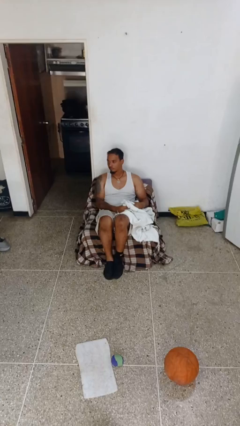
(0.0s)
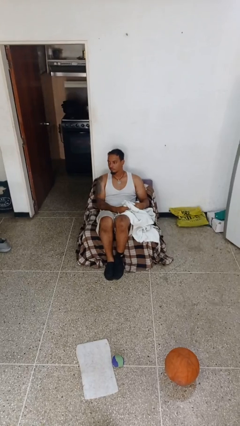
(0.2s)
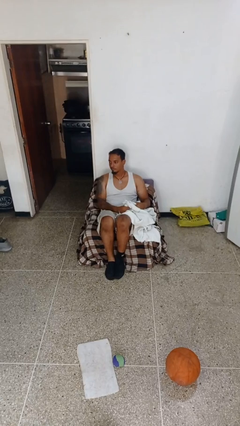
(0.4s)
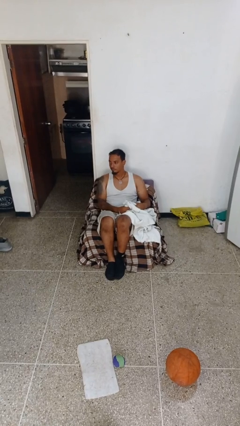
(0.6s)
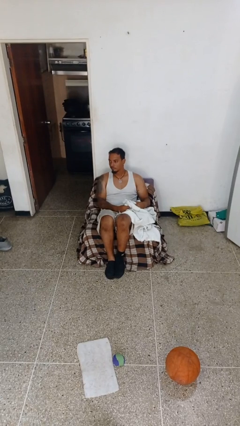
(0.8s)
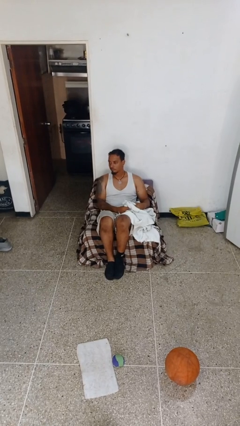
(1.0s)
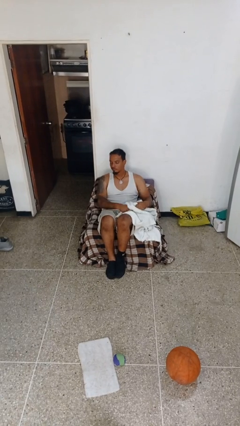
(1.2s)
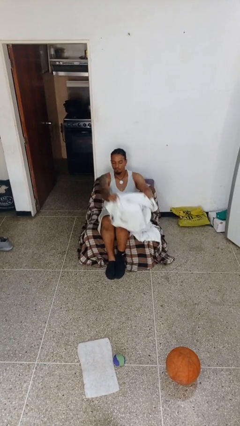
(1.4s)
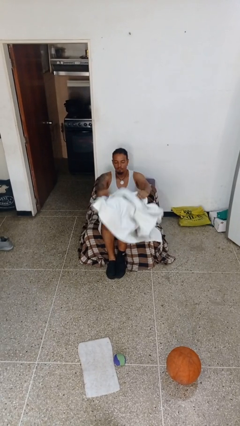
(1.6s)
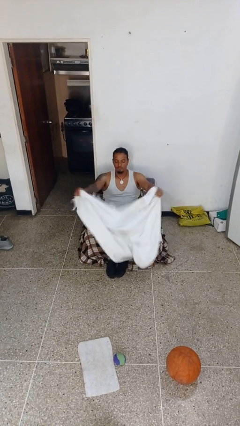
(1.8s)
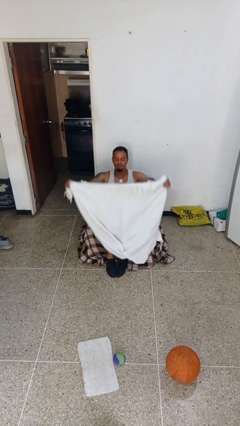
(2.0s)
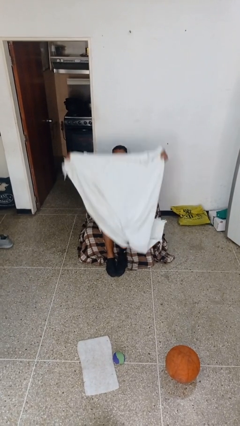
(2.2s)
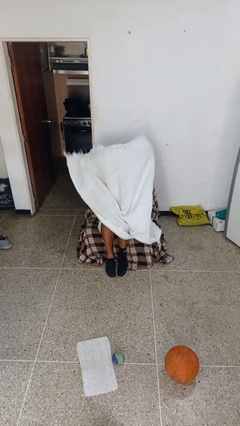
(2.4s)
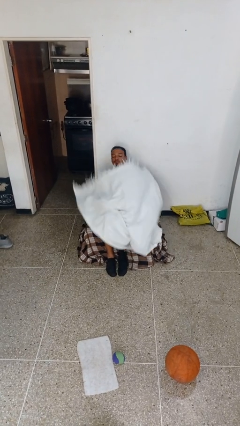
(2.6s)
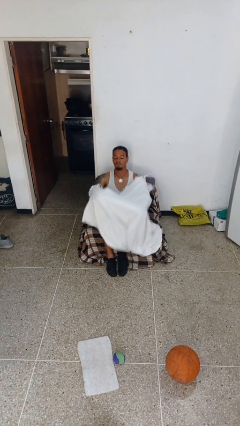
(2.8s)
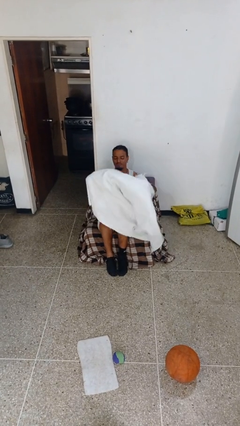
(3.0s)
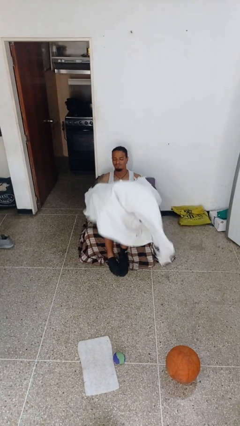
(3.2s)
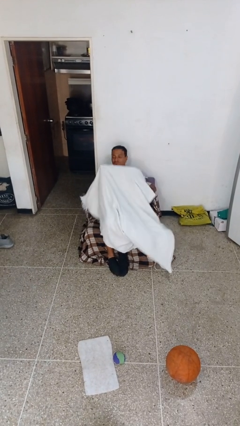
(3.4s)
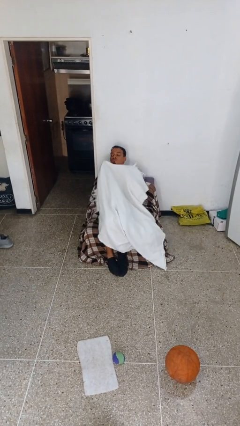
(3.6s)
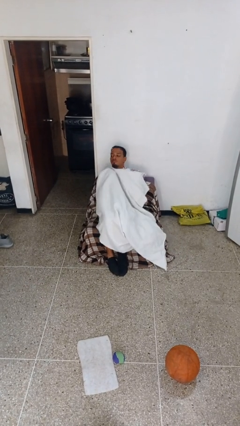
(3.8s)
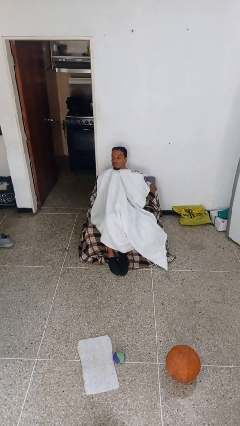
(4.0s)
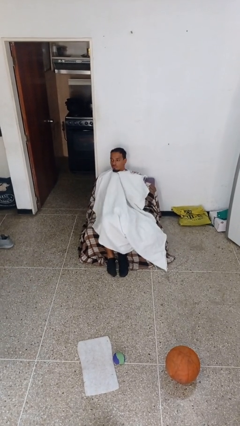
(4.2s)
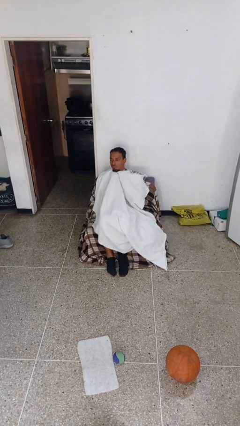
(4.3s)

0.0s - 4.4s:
person covers with blanket

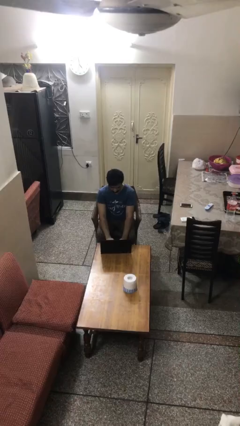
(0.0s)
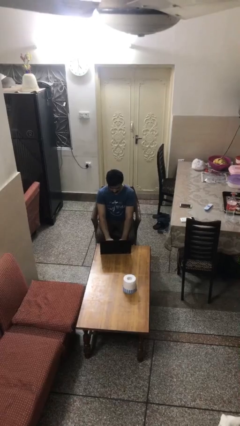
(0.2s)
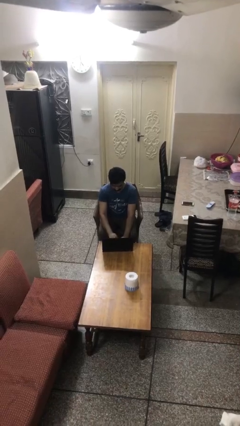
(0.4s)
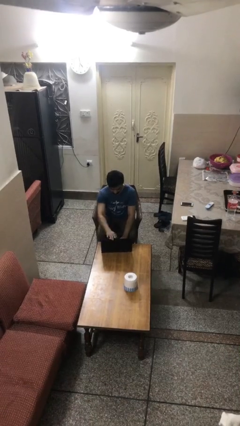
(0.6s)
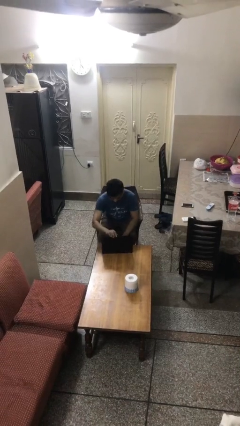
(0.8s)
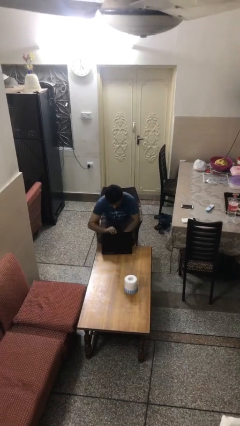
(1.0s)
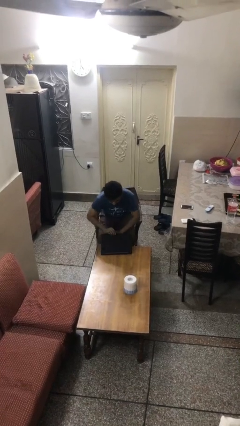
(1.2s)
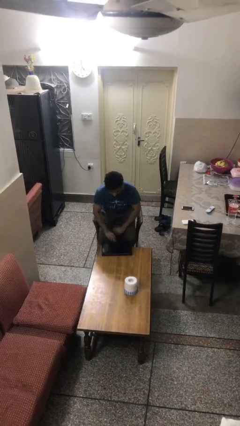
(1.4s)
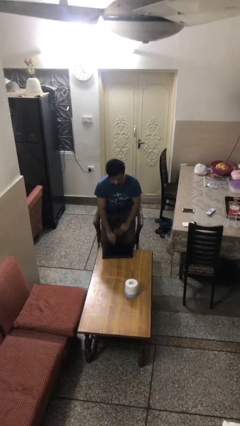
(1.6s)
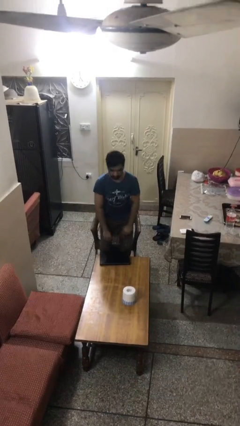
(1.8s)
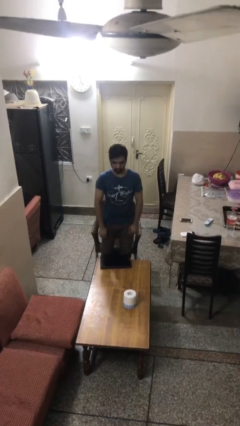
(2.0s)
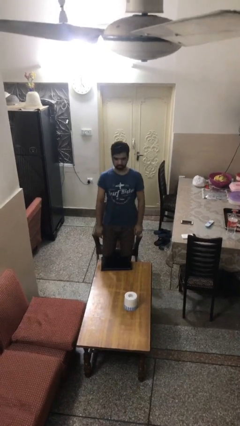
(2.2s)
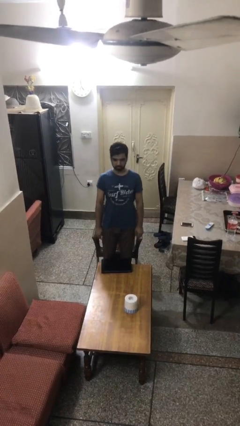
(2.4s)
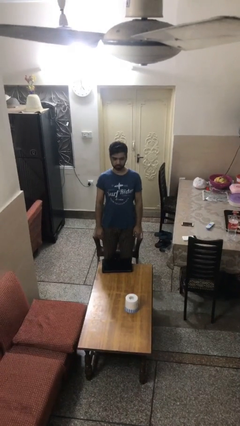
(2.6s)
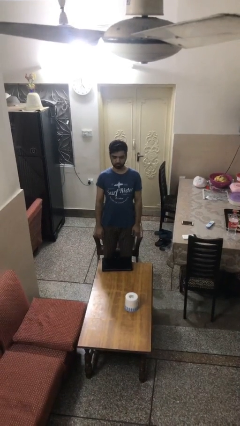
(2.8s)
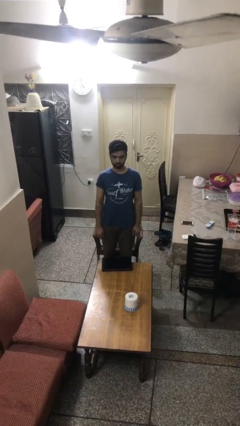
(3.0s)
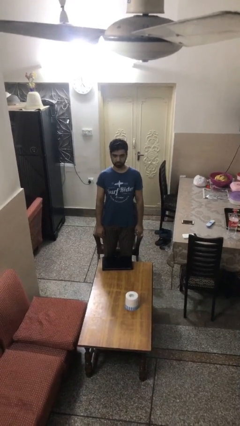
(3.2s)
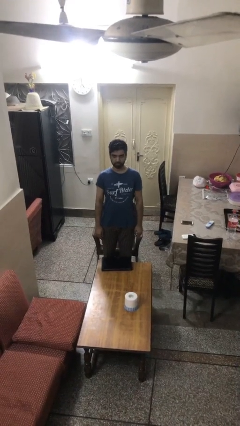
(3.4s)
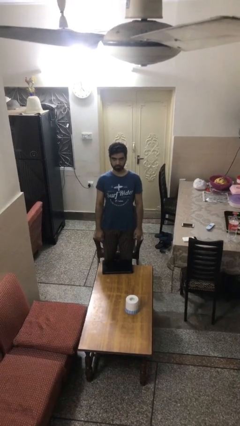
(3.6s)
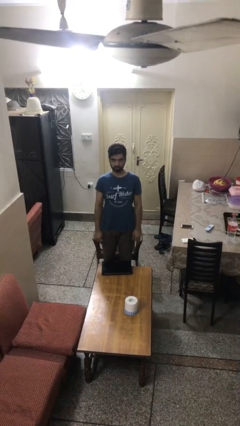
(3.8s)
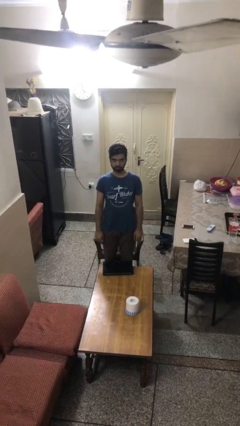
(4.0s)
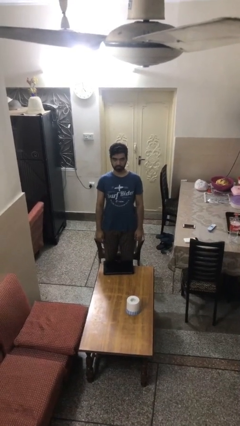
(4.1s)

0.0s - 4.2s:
person stands up

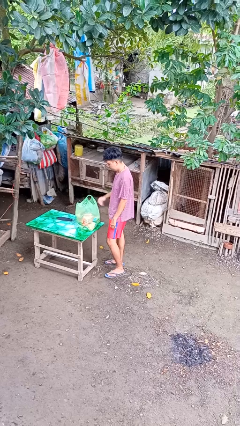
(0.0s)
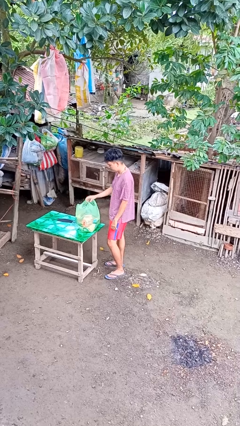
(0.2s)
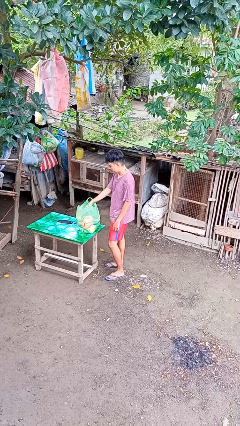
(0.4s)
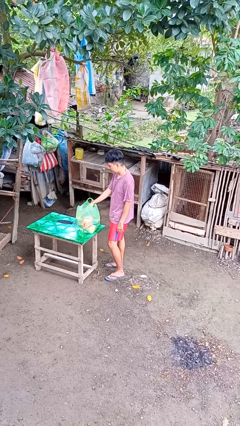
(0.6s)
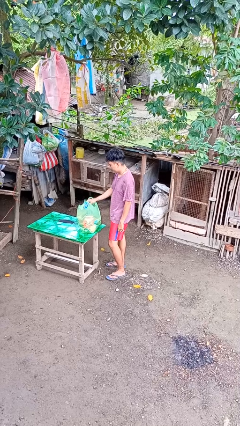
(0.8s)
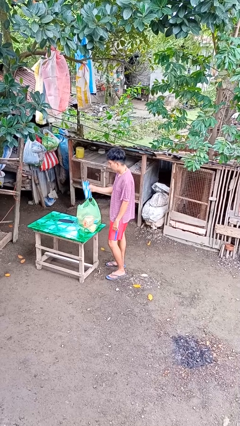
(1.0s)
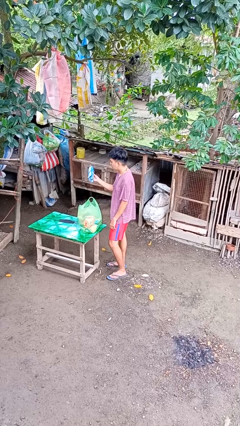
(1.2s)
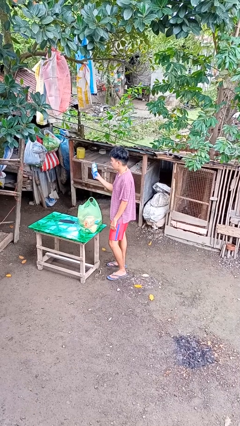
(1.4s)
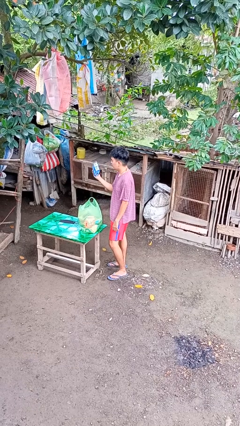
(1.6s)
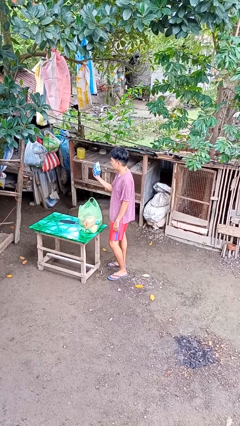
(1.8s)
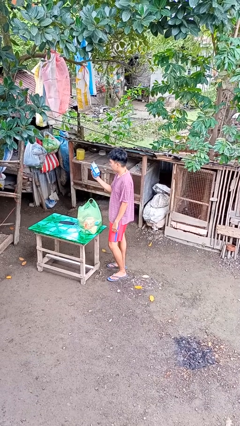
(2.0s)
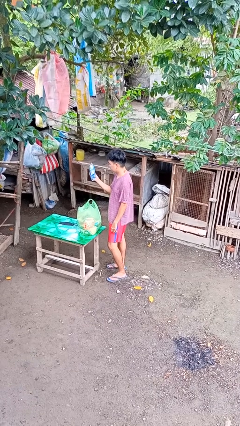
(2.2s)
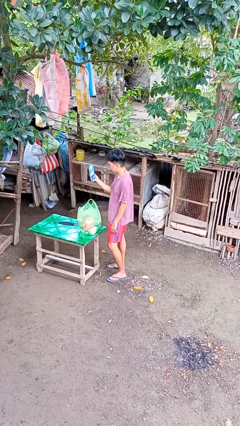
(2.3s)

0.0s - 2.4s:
person takes object from bag

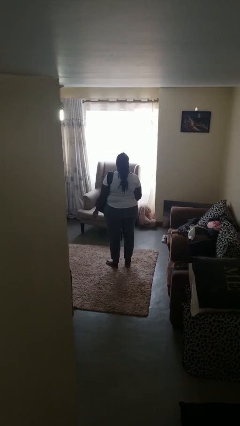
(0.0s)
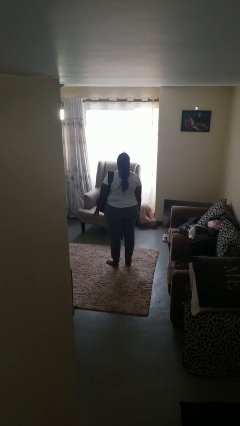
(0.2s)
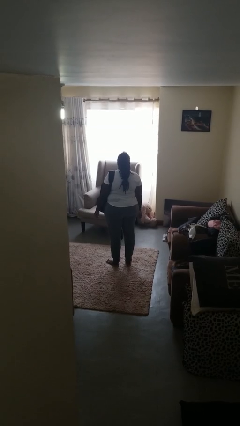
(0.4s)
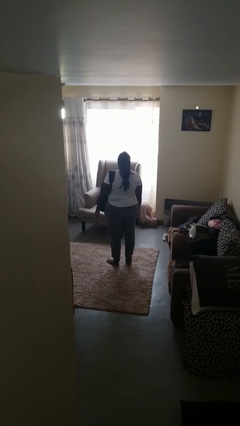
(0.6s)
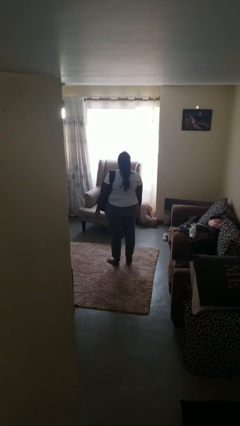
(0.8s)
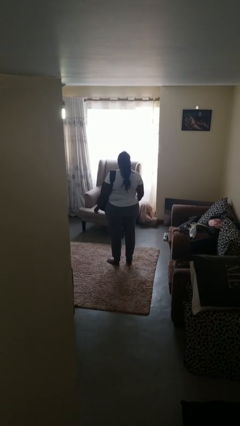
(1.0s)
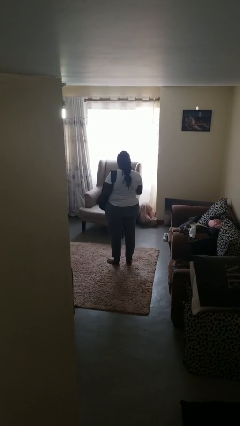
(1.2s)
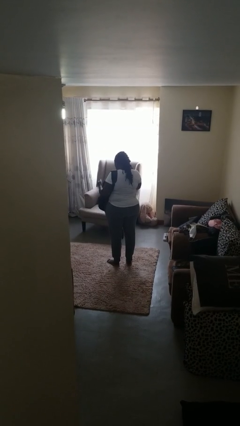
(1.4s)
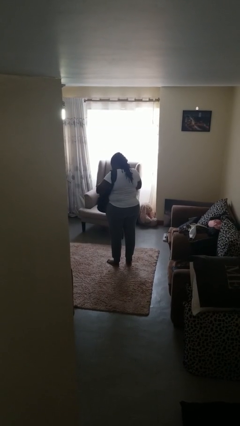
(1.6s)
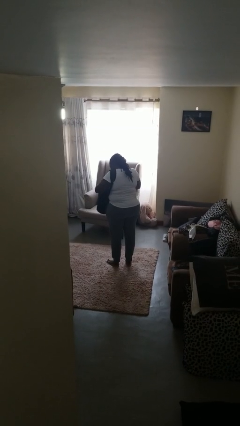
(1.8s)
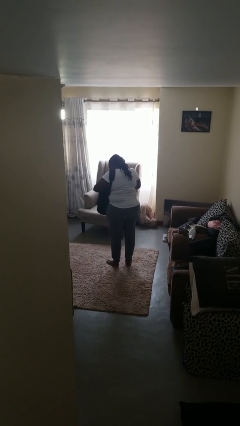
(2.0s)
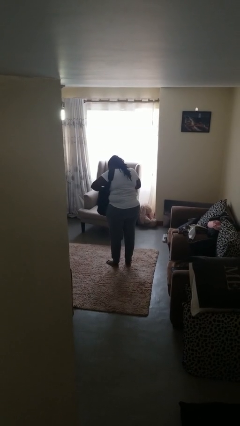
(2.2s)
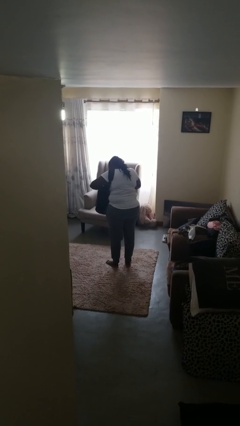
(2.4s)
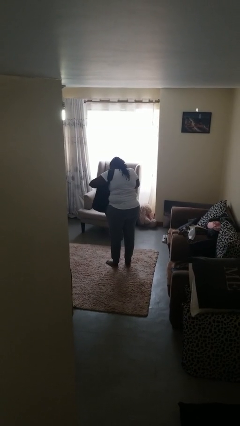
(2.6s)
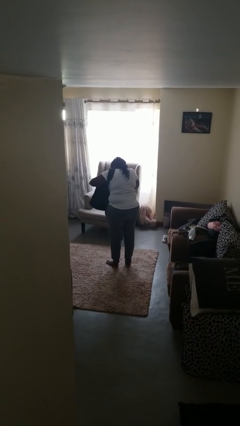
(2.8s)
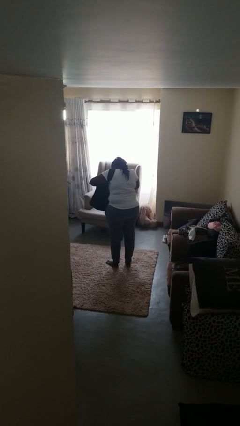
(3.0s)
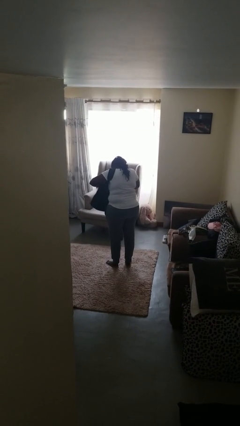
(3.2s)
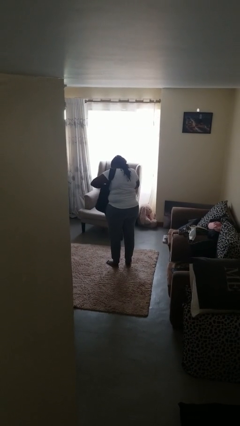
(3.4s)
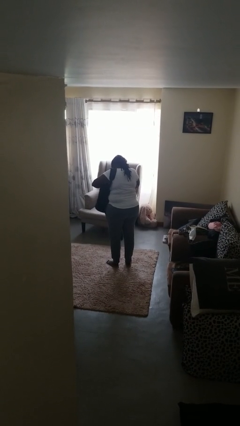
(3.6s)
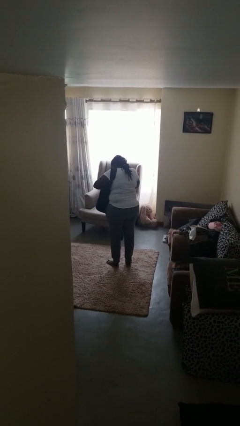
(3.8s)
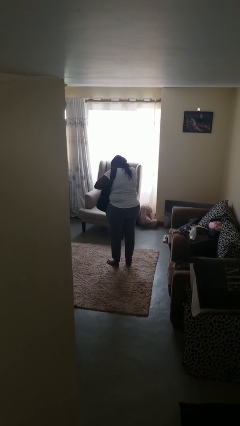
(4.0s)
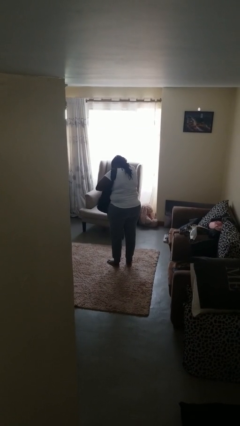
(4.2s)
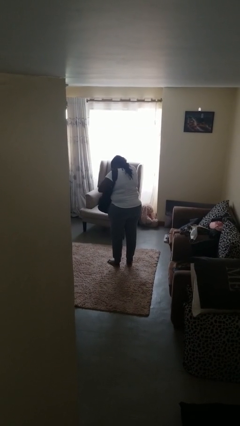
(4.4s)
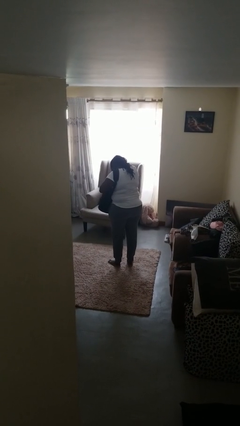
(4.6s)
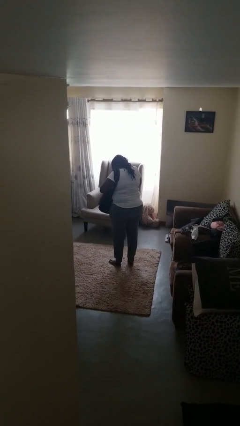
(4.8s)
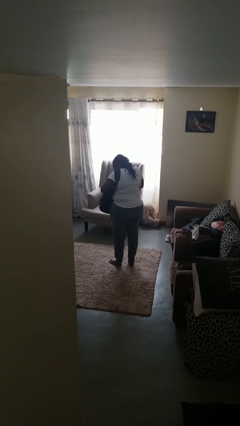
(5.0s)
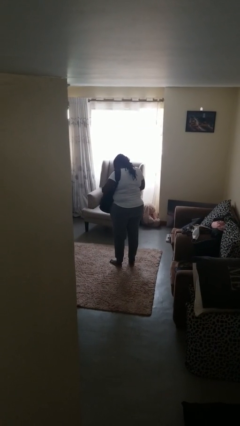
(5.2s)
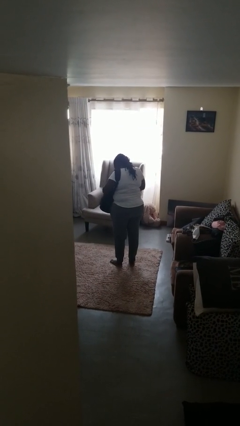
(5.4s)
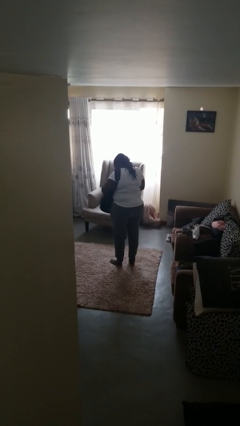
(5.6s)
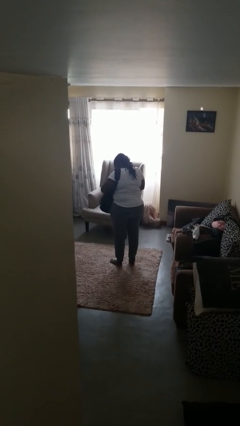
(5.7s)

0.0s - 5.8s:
person searches in backpack

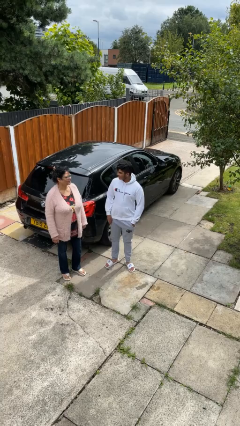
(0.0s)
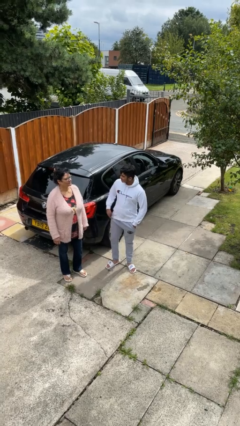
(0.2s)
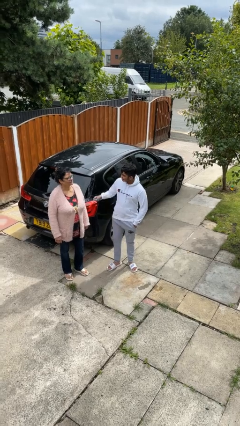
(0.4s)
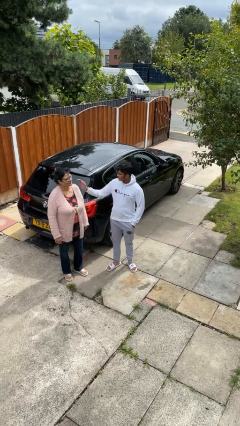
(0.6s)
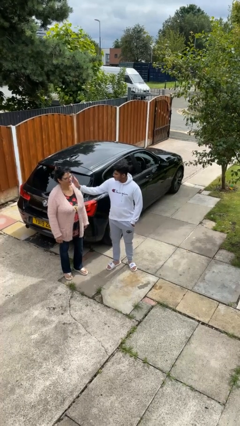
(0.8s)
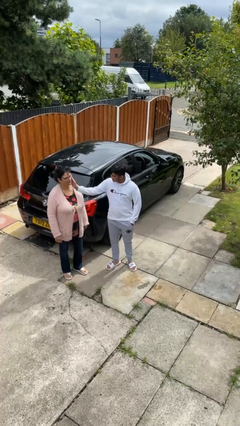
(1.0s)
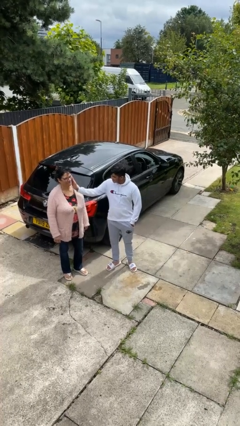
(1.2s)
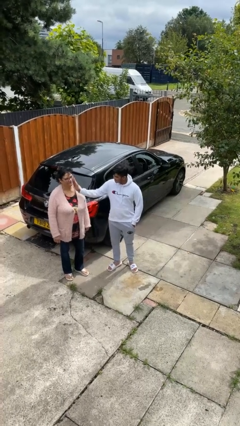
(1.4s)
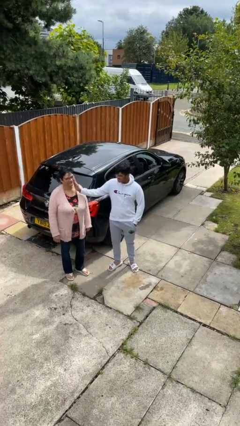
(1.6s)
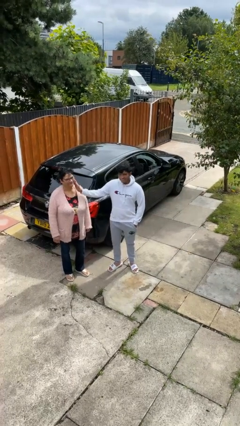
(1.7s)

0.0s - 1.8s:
person touches face of person
